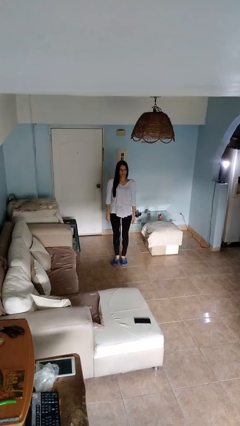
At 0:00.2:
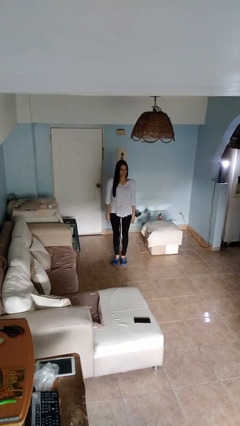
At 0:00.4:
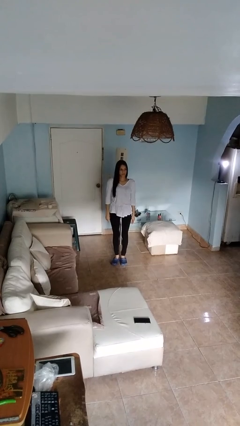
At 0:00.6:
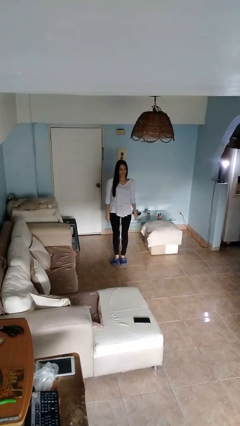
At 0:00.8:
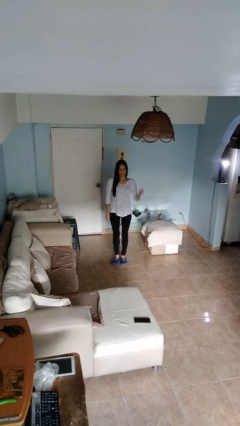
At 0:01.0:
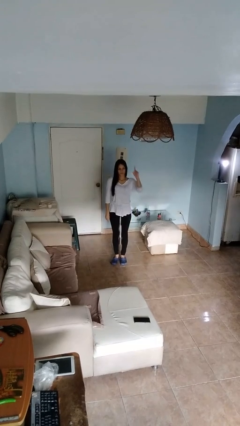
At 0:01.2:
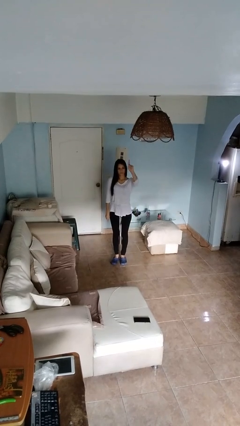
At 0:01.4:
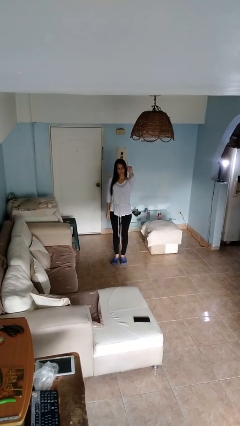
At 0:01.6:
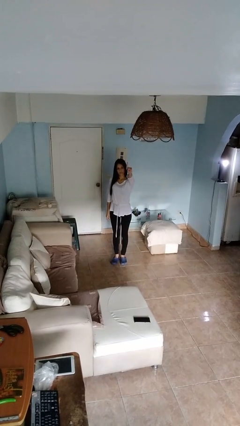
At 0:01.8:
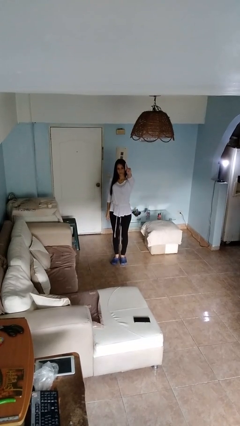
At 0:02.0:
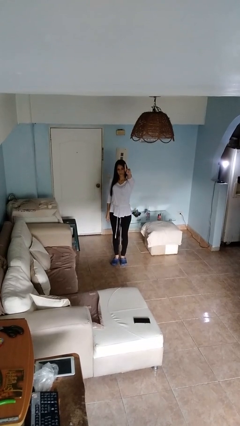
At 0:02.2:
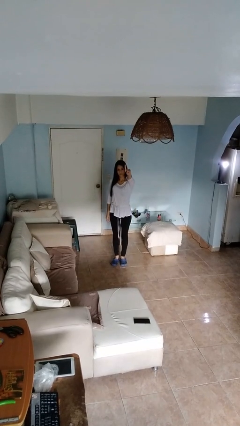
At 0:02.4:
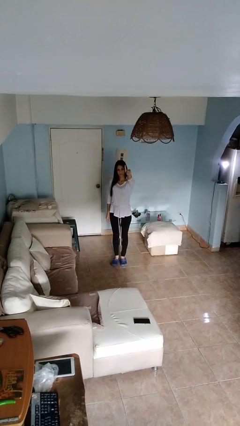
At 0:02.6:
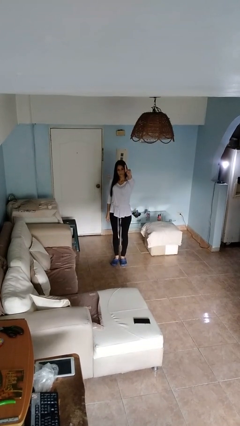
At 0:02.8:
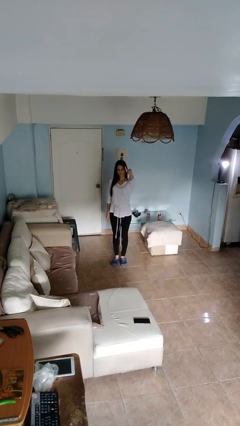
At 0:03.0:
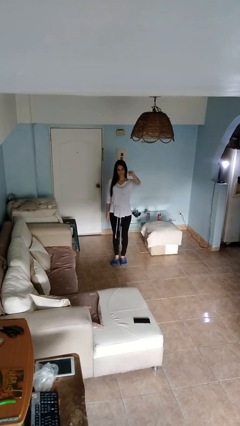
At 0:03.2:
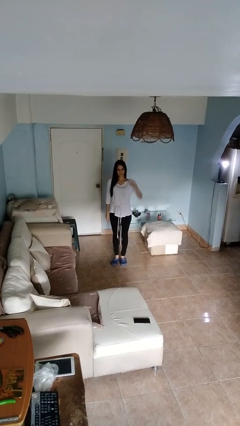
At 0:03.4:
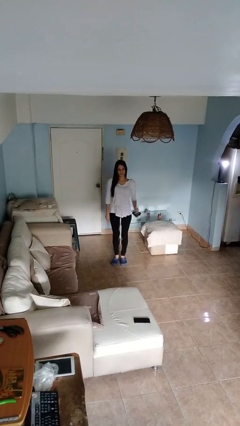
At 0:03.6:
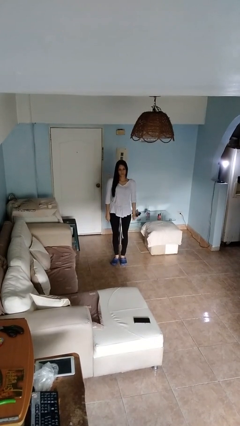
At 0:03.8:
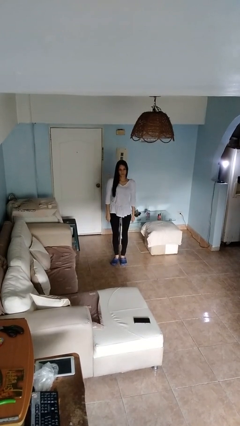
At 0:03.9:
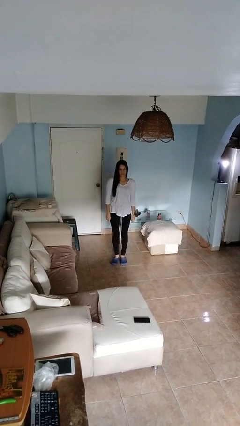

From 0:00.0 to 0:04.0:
person gestures number one

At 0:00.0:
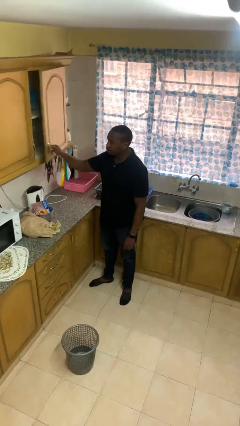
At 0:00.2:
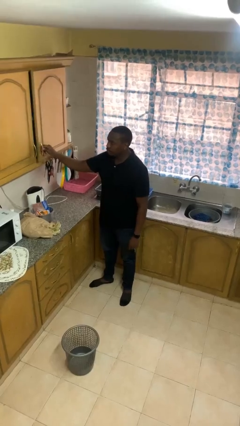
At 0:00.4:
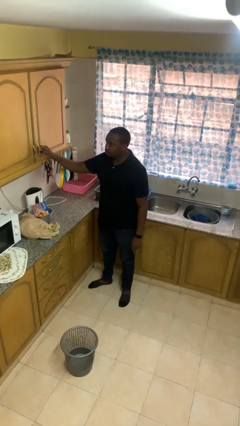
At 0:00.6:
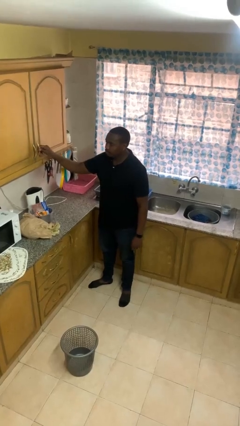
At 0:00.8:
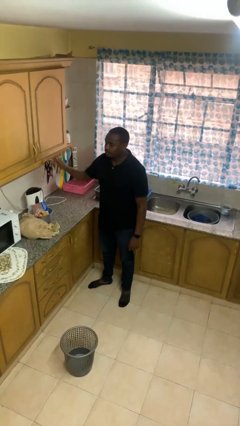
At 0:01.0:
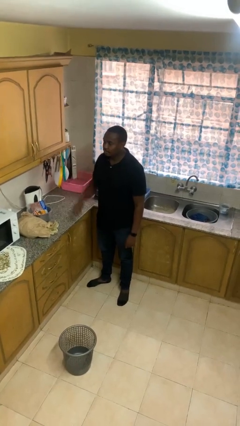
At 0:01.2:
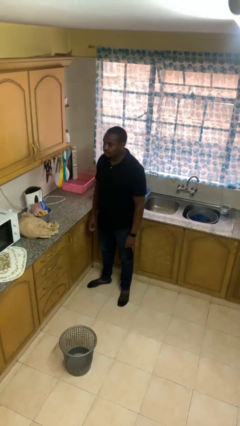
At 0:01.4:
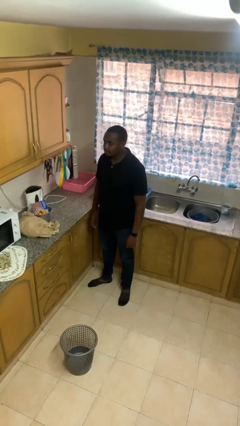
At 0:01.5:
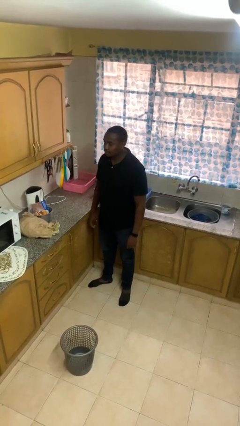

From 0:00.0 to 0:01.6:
person closes cabinet

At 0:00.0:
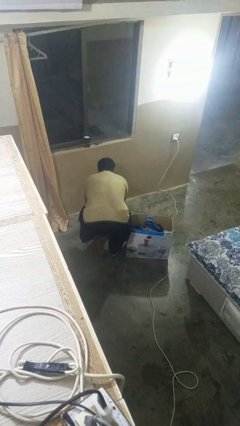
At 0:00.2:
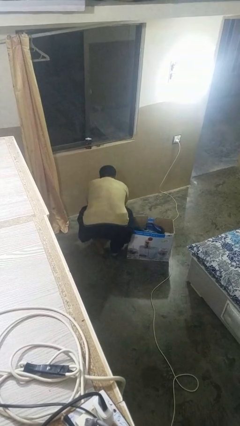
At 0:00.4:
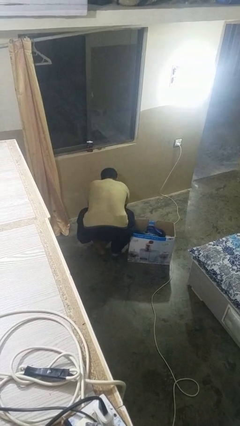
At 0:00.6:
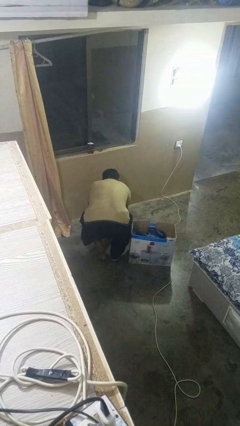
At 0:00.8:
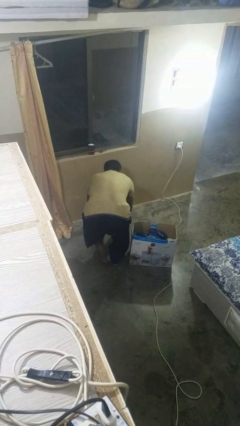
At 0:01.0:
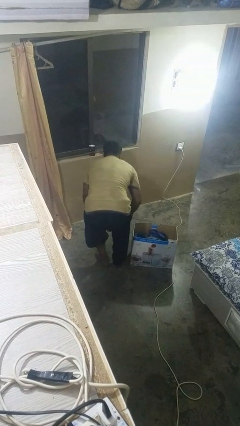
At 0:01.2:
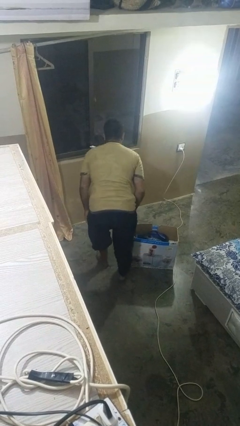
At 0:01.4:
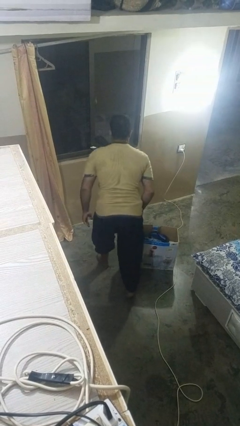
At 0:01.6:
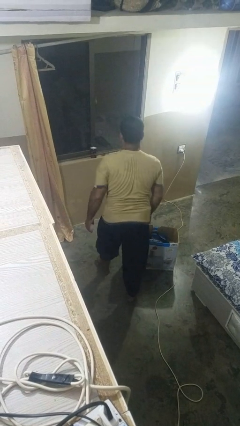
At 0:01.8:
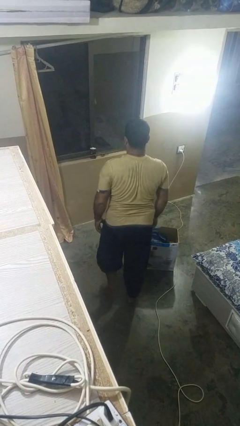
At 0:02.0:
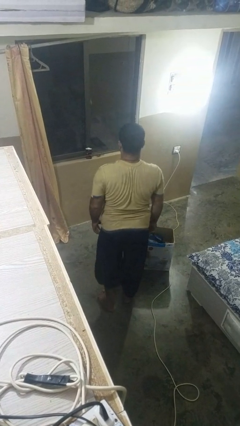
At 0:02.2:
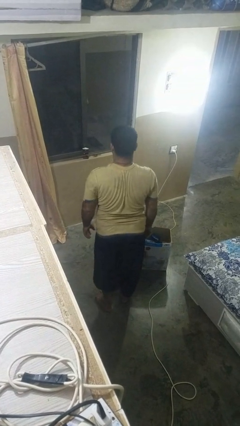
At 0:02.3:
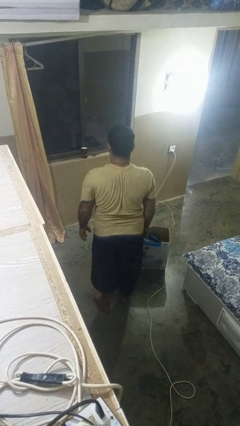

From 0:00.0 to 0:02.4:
person stands up from floor

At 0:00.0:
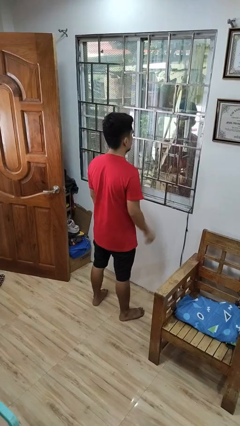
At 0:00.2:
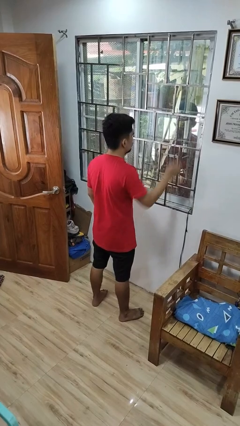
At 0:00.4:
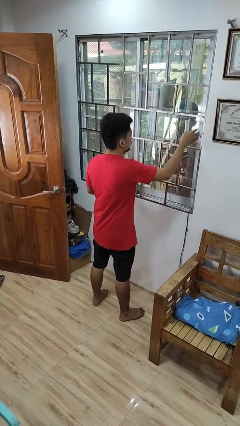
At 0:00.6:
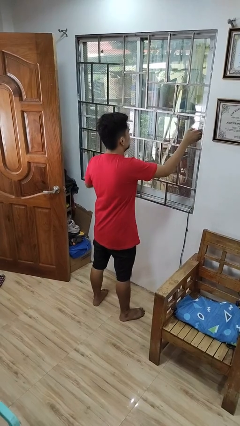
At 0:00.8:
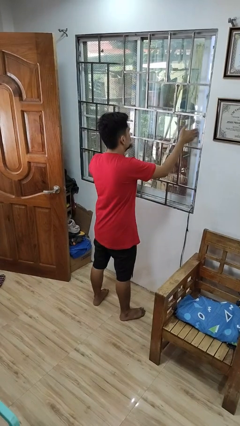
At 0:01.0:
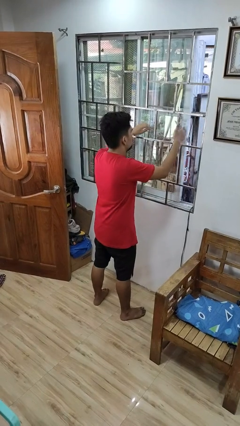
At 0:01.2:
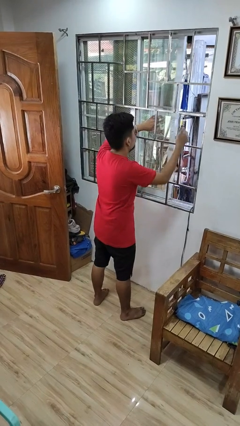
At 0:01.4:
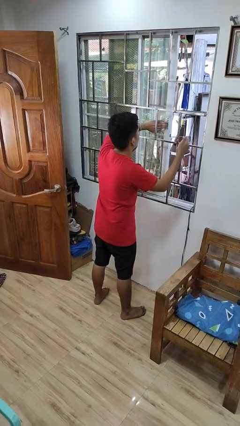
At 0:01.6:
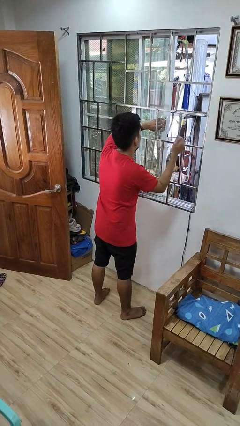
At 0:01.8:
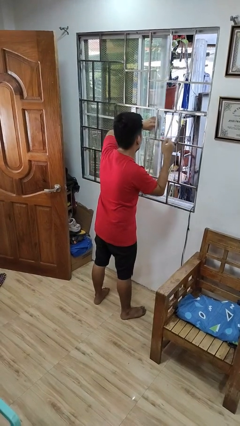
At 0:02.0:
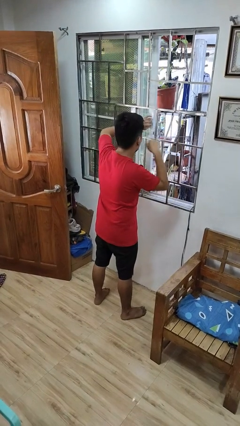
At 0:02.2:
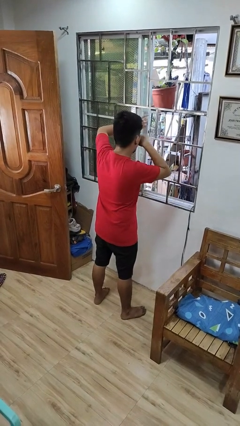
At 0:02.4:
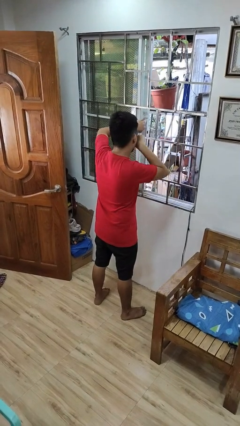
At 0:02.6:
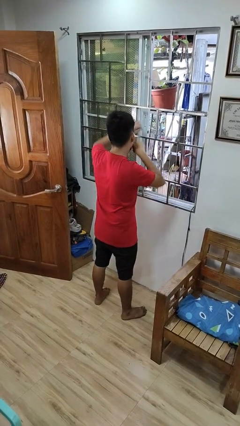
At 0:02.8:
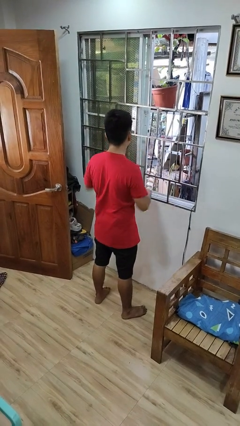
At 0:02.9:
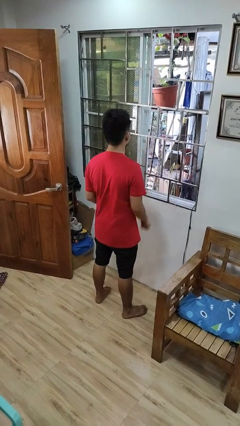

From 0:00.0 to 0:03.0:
person opens home window

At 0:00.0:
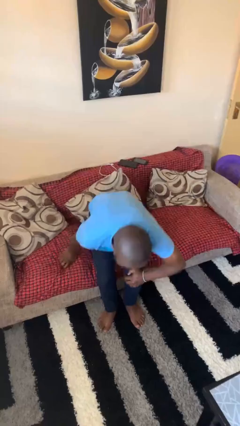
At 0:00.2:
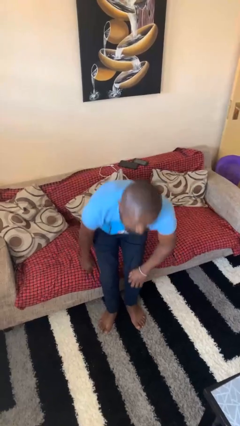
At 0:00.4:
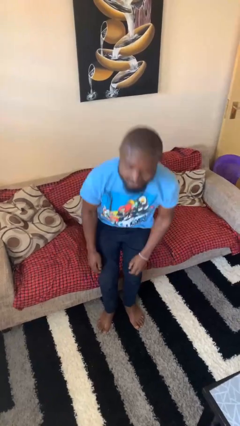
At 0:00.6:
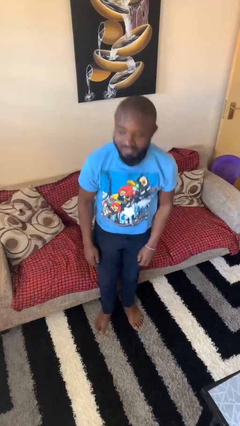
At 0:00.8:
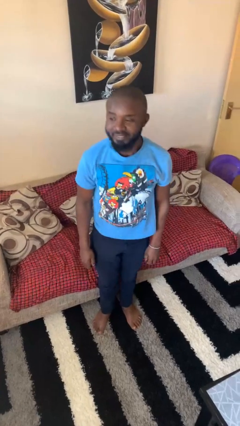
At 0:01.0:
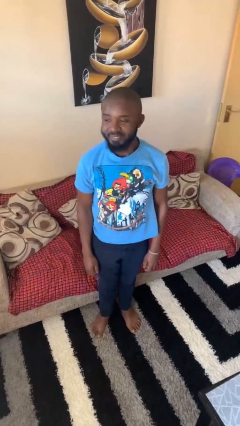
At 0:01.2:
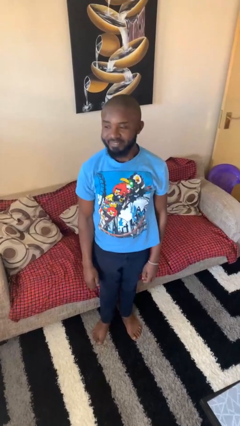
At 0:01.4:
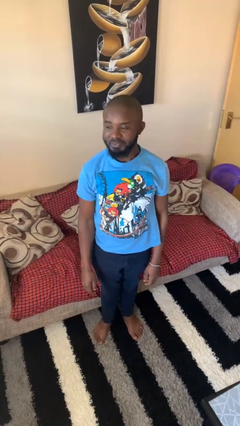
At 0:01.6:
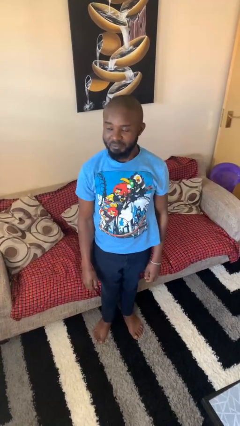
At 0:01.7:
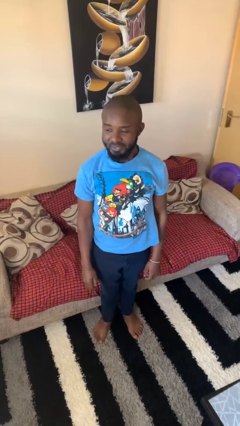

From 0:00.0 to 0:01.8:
person stands up

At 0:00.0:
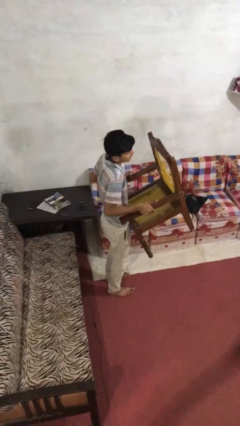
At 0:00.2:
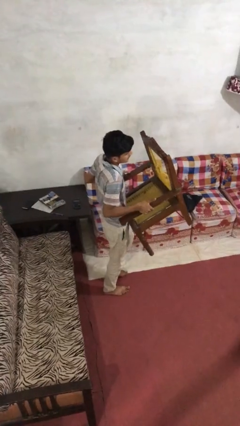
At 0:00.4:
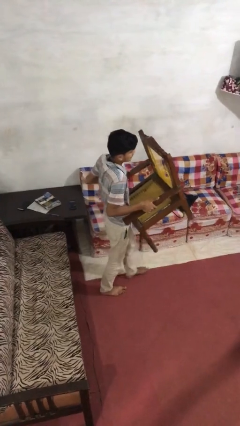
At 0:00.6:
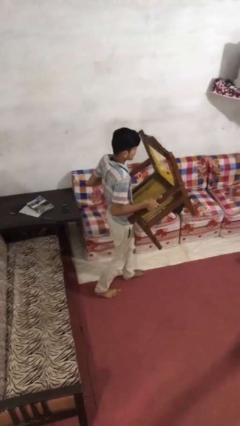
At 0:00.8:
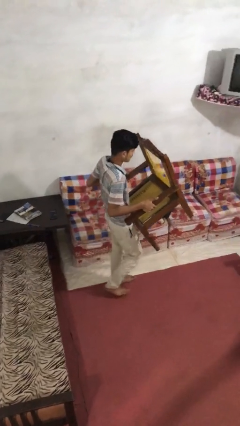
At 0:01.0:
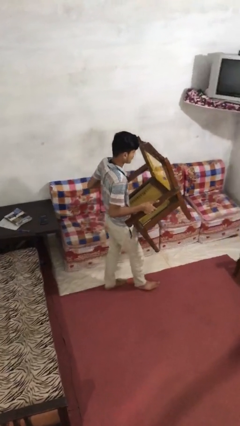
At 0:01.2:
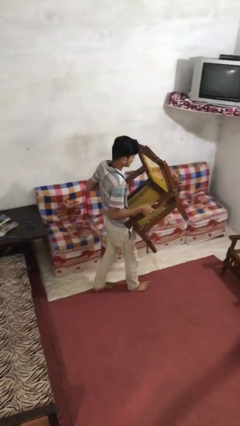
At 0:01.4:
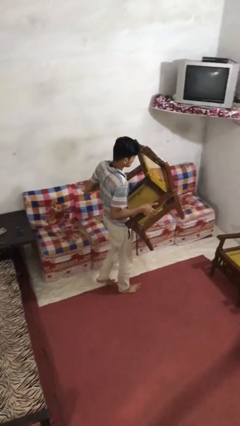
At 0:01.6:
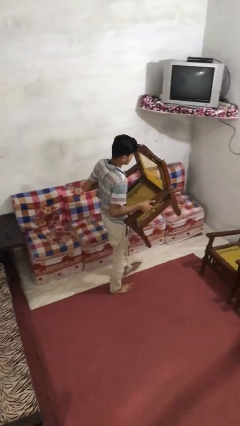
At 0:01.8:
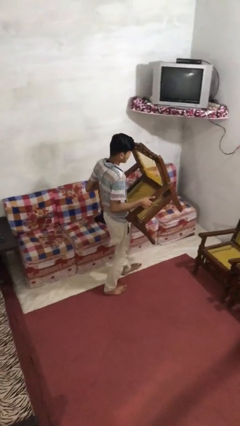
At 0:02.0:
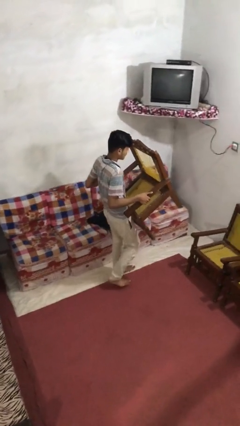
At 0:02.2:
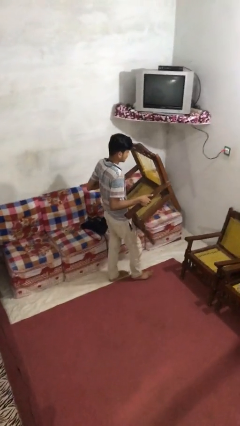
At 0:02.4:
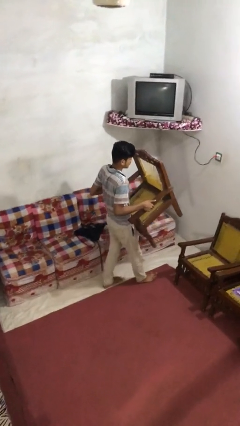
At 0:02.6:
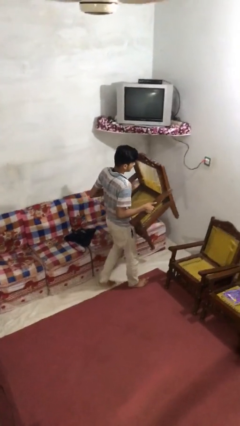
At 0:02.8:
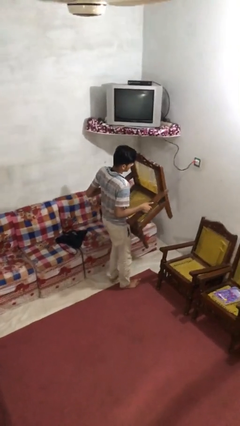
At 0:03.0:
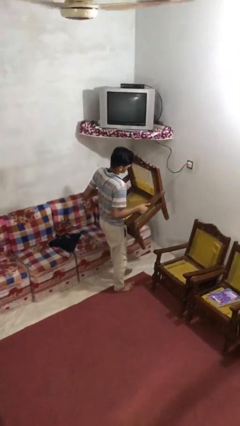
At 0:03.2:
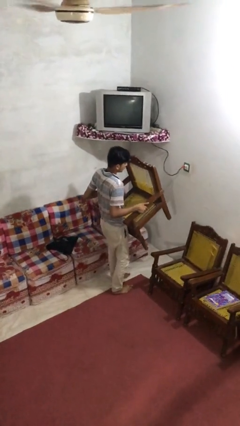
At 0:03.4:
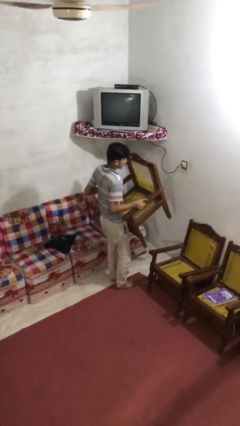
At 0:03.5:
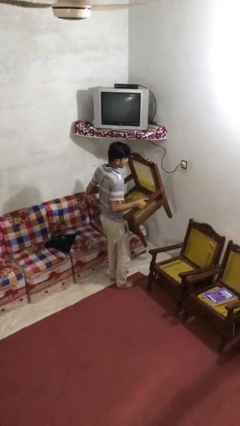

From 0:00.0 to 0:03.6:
person carries heavy object

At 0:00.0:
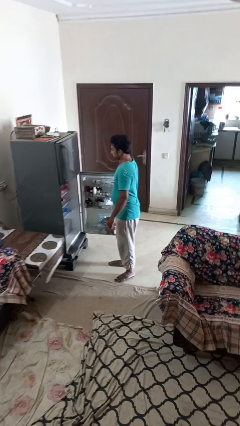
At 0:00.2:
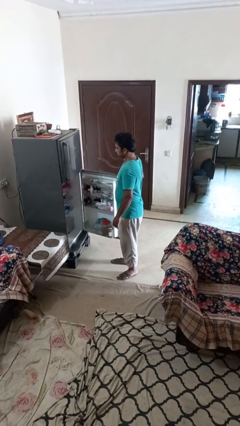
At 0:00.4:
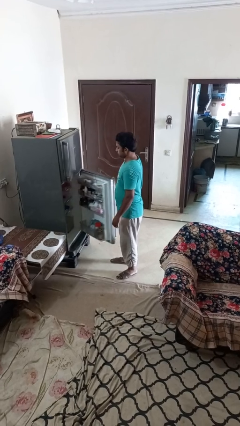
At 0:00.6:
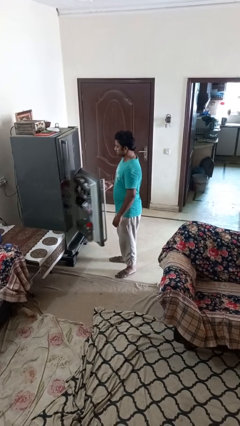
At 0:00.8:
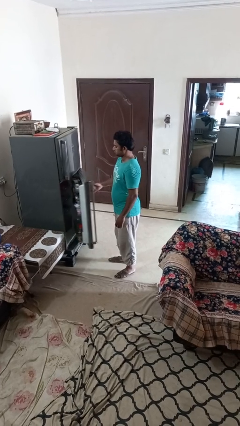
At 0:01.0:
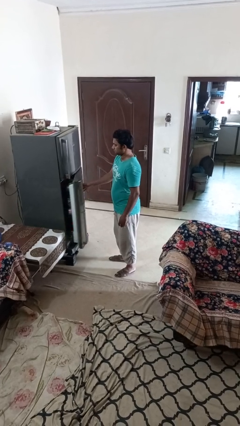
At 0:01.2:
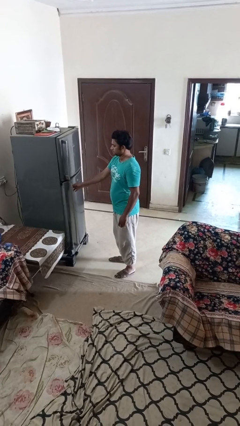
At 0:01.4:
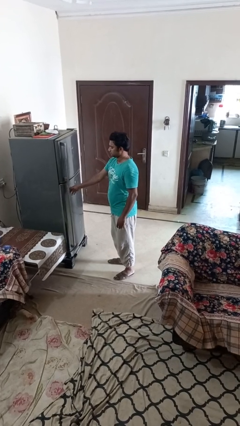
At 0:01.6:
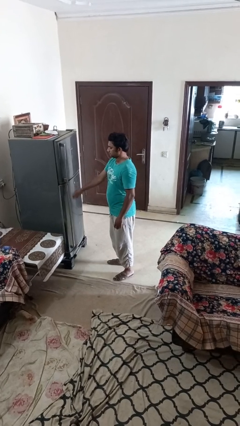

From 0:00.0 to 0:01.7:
person closes refrigerator
